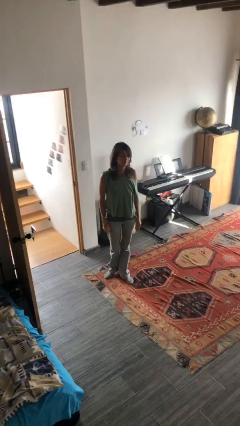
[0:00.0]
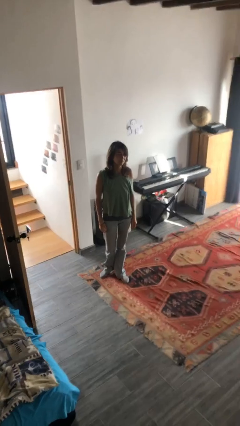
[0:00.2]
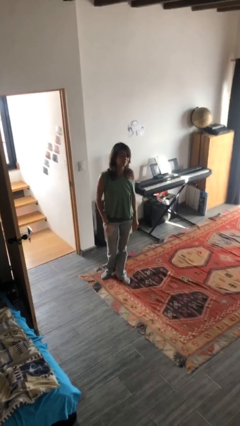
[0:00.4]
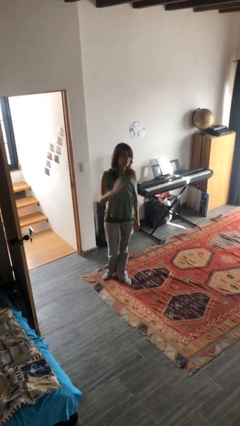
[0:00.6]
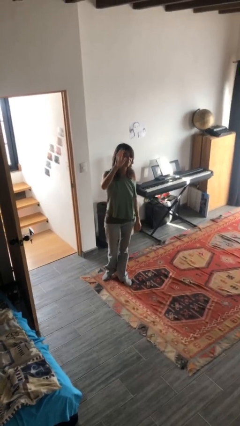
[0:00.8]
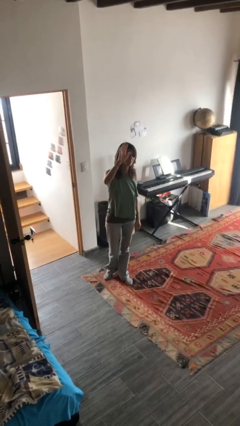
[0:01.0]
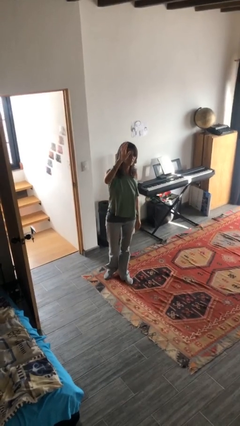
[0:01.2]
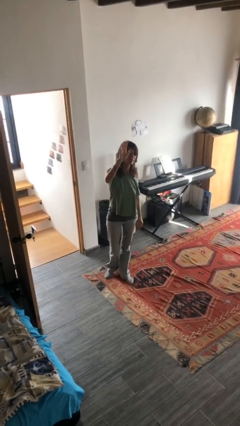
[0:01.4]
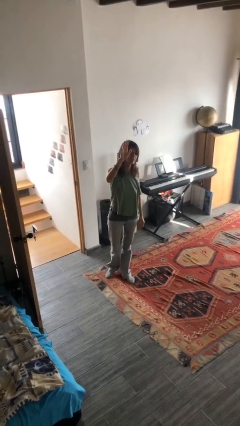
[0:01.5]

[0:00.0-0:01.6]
person gestures raise hand

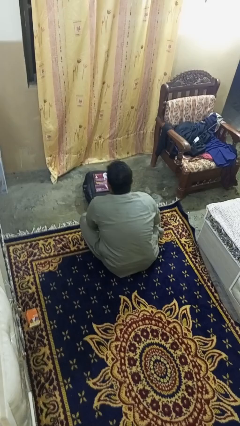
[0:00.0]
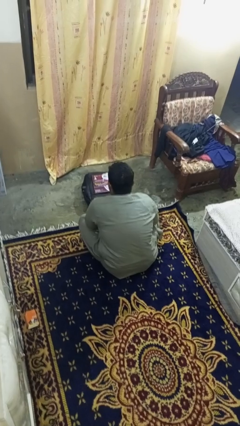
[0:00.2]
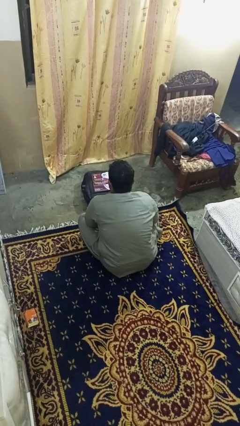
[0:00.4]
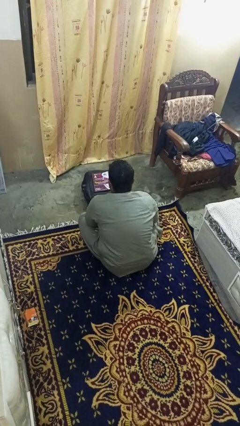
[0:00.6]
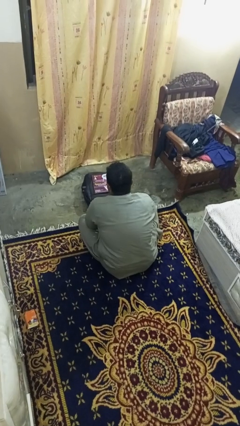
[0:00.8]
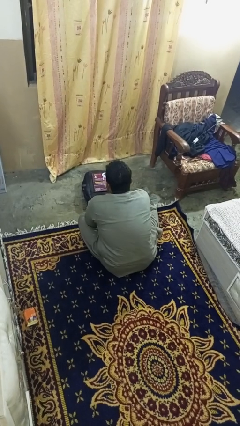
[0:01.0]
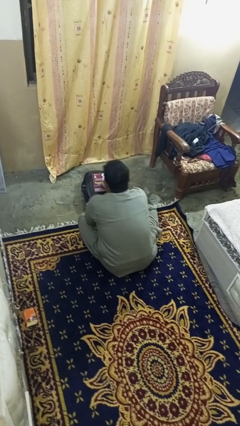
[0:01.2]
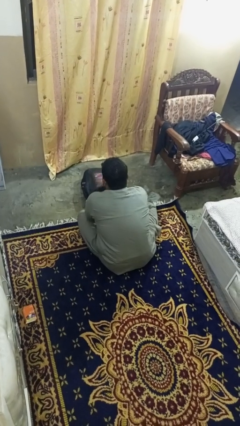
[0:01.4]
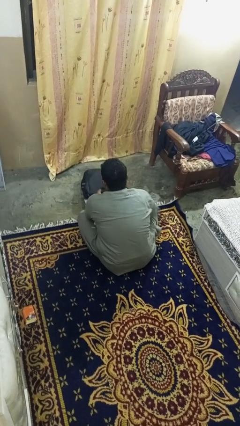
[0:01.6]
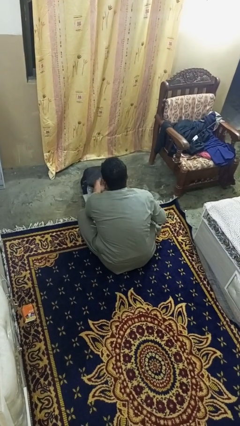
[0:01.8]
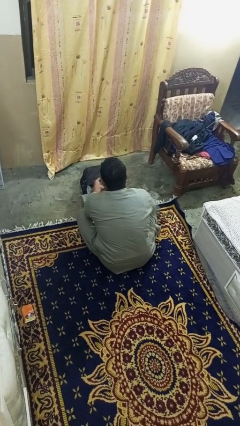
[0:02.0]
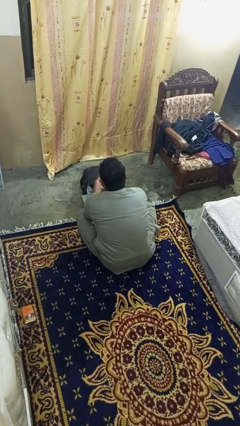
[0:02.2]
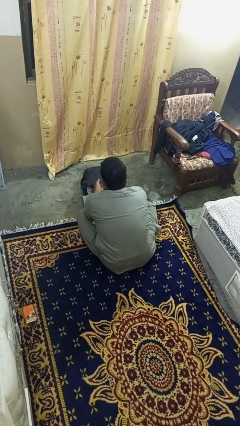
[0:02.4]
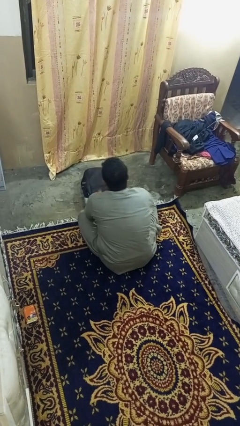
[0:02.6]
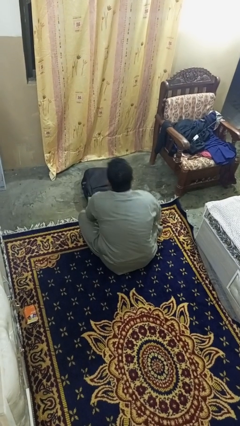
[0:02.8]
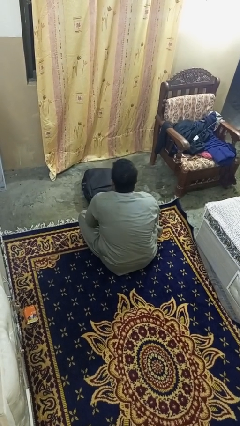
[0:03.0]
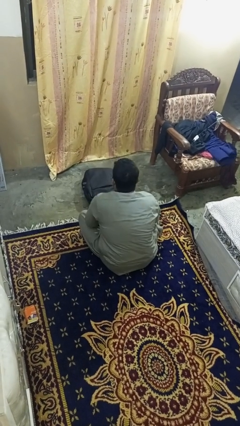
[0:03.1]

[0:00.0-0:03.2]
person puts object into bag

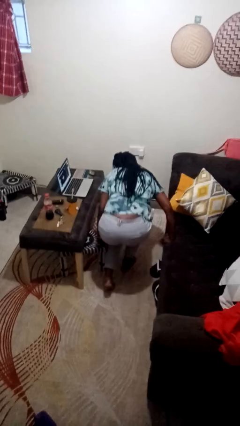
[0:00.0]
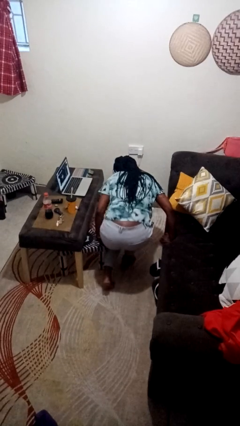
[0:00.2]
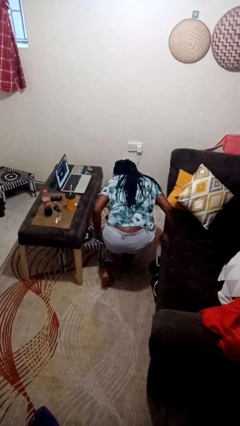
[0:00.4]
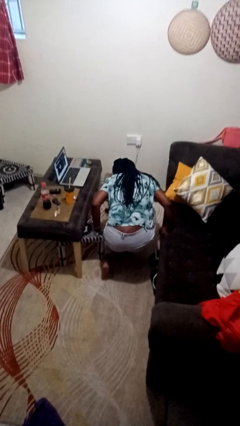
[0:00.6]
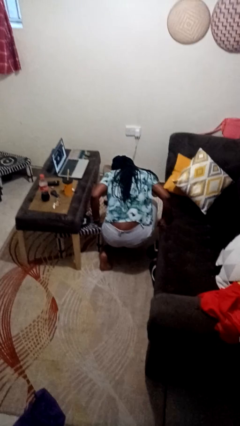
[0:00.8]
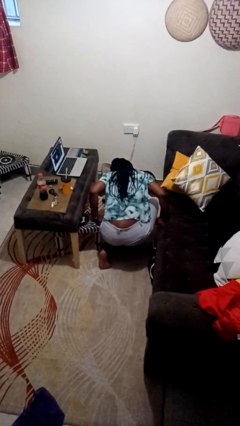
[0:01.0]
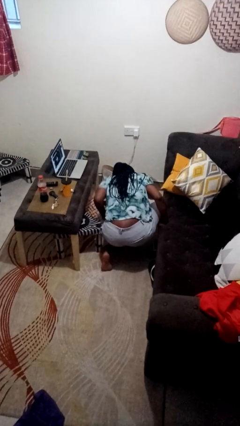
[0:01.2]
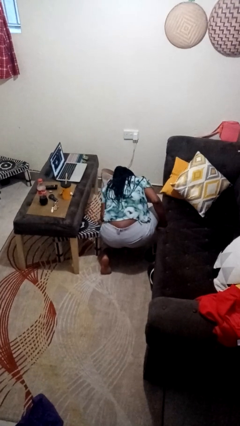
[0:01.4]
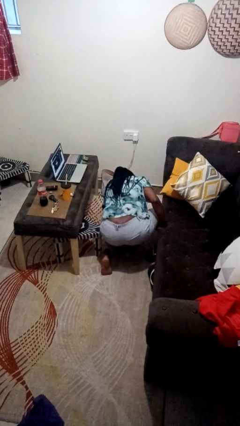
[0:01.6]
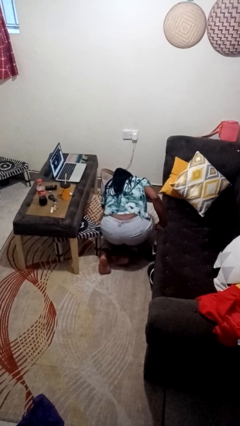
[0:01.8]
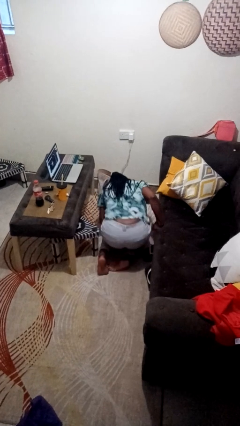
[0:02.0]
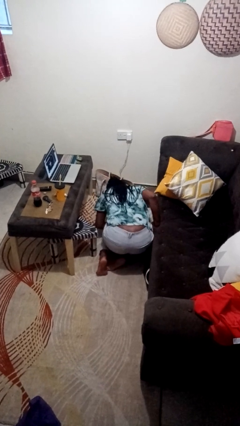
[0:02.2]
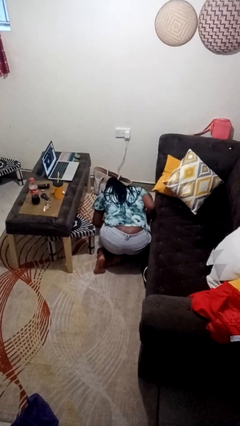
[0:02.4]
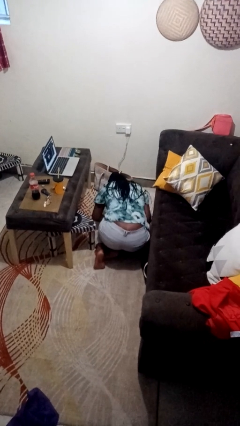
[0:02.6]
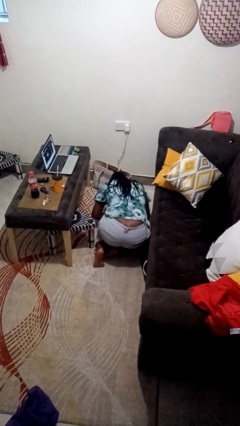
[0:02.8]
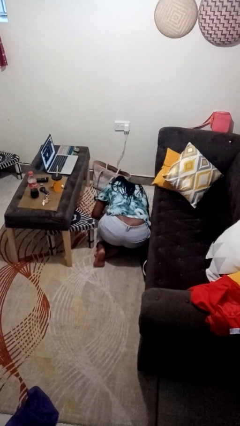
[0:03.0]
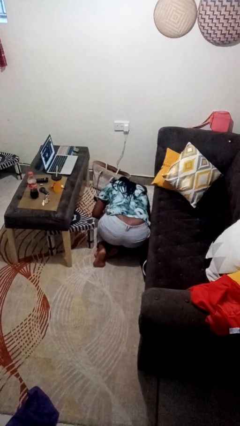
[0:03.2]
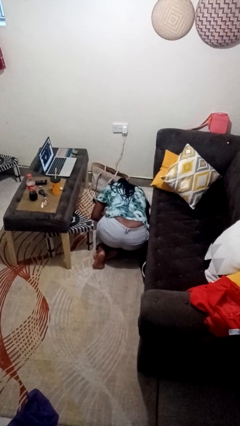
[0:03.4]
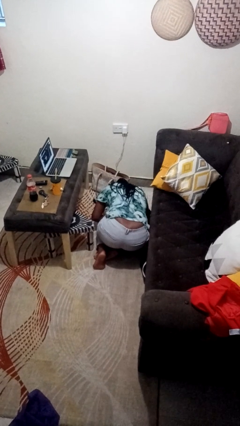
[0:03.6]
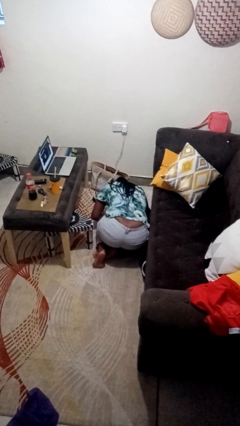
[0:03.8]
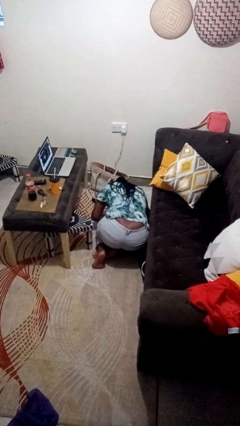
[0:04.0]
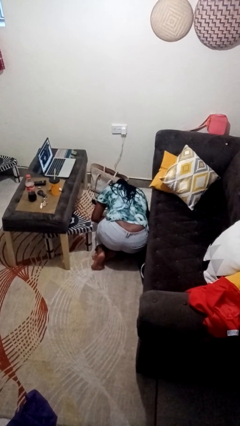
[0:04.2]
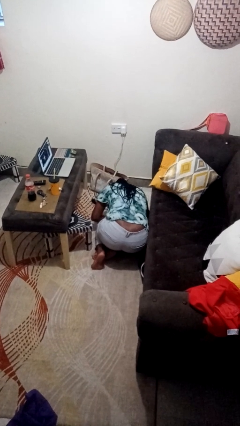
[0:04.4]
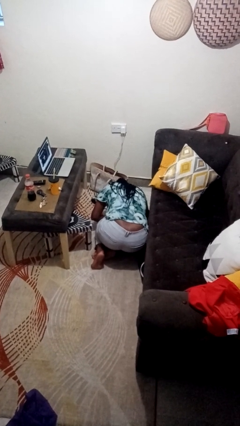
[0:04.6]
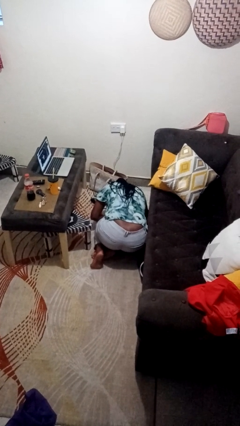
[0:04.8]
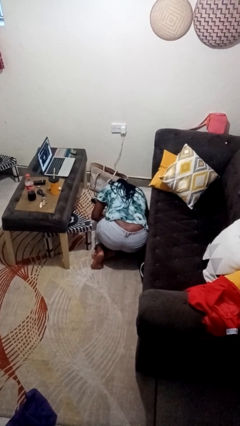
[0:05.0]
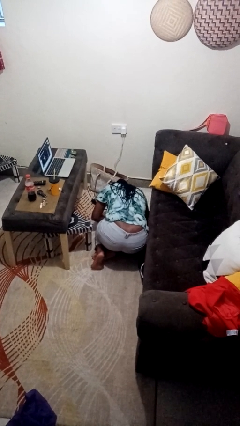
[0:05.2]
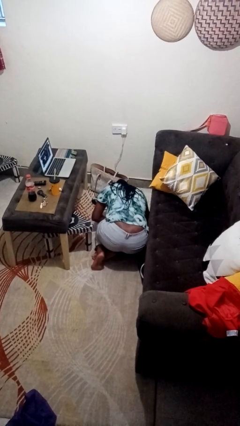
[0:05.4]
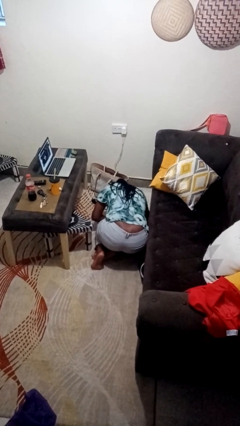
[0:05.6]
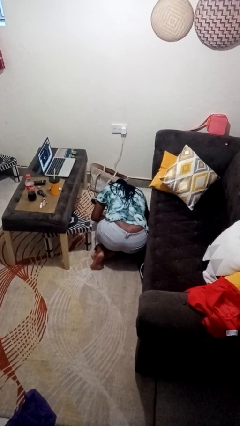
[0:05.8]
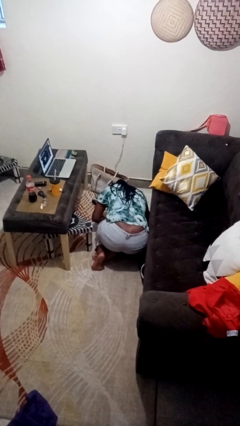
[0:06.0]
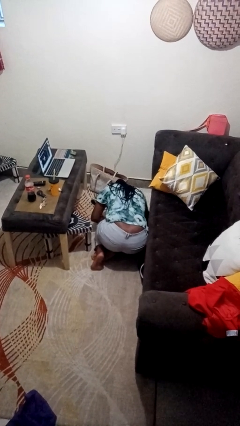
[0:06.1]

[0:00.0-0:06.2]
person lies down on floor

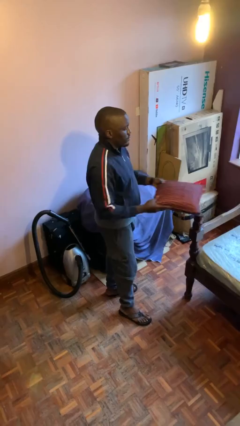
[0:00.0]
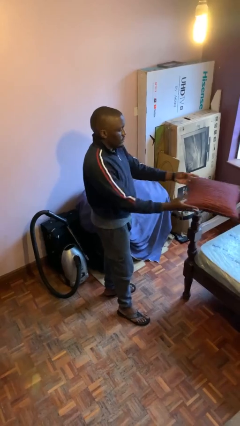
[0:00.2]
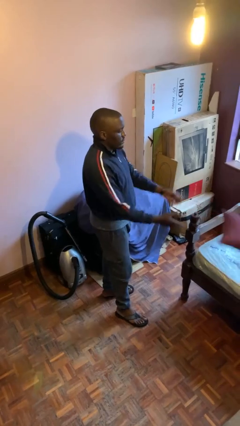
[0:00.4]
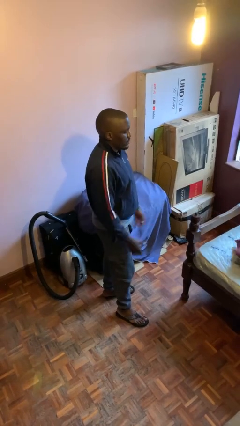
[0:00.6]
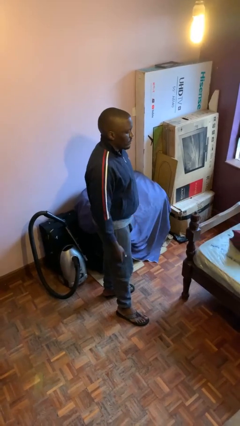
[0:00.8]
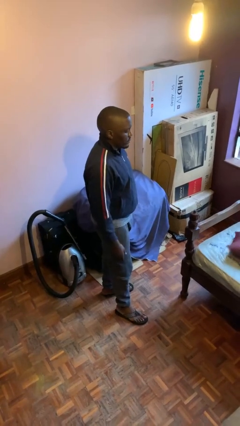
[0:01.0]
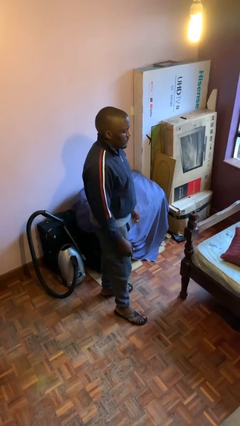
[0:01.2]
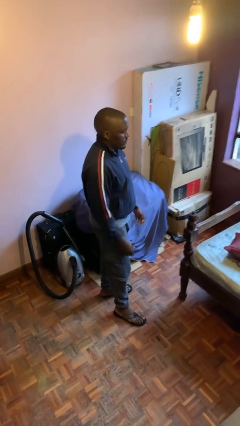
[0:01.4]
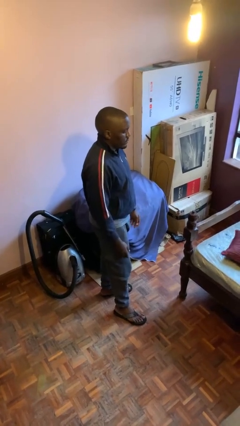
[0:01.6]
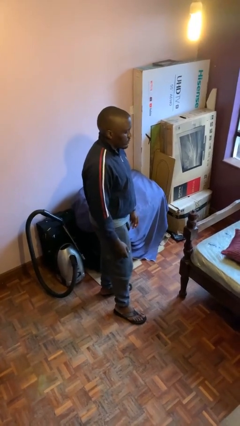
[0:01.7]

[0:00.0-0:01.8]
person throws object on bed

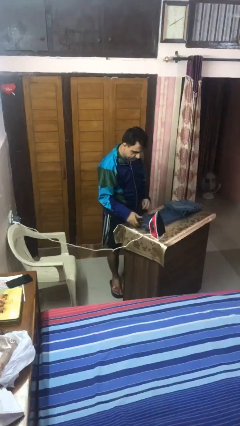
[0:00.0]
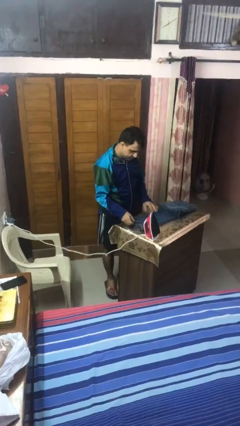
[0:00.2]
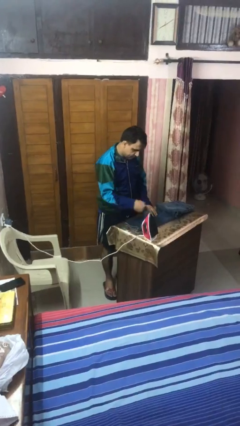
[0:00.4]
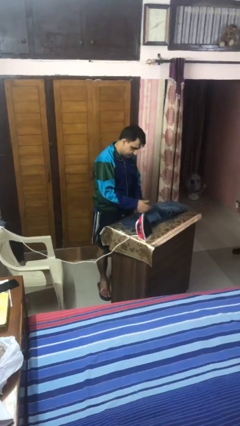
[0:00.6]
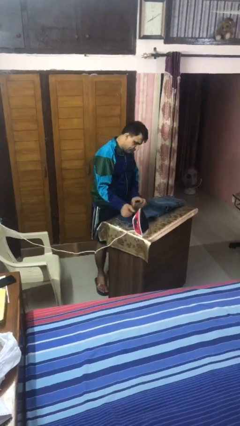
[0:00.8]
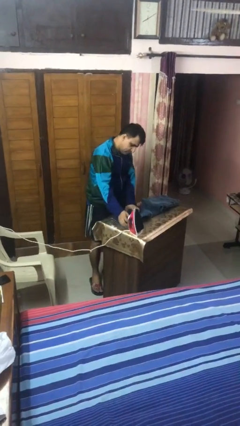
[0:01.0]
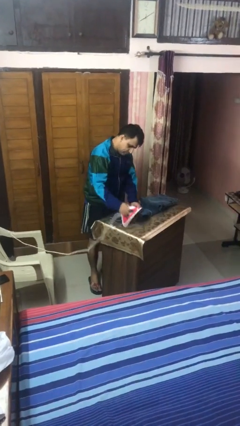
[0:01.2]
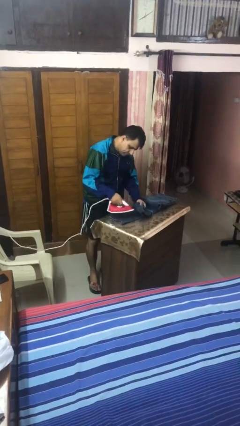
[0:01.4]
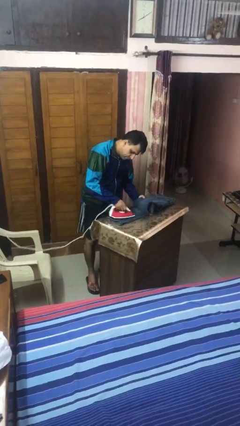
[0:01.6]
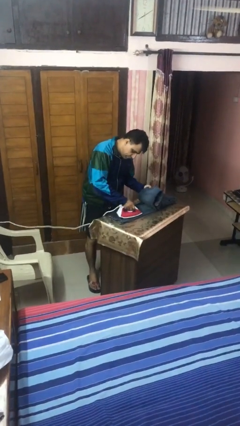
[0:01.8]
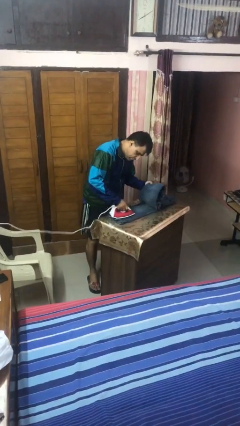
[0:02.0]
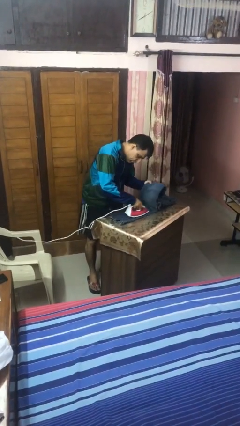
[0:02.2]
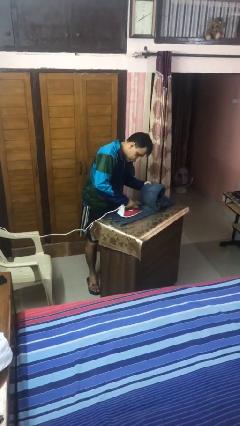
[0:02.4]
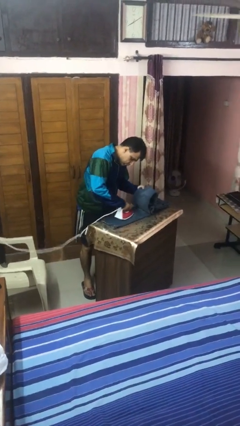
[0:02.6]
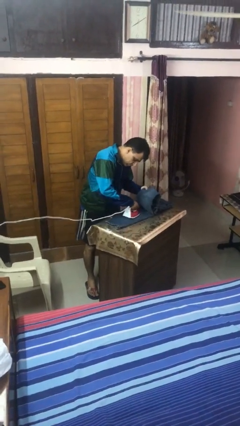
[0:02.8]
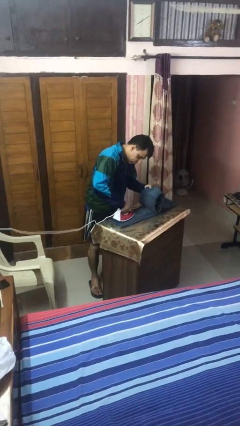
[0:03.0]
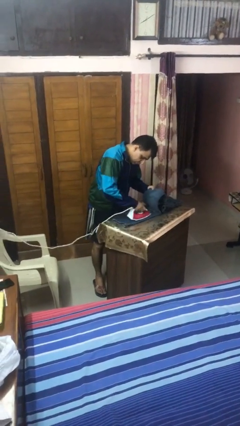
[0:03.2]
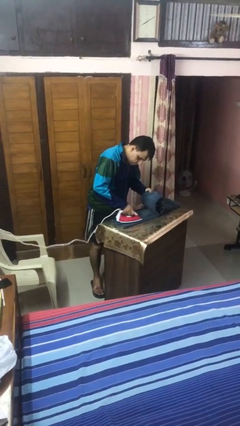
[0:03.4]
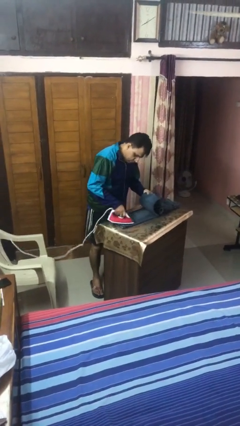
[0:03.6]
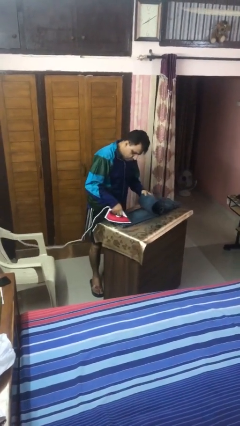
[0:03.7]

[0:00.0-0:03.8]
person irons clothes

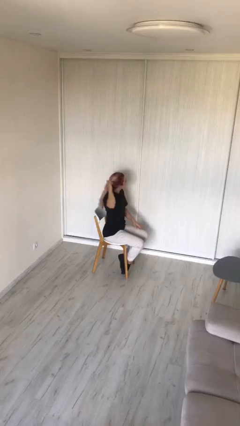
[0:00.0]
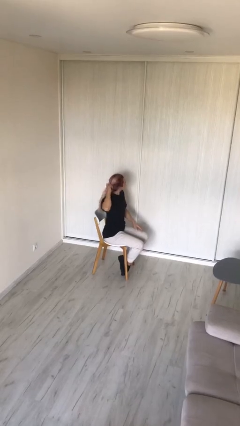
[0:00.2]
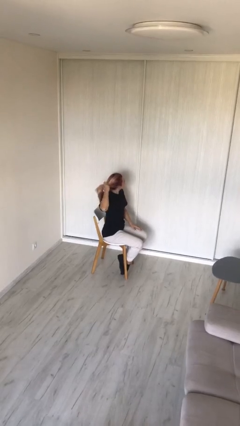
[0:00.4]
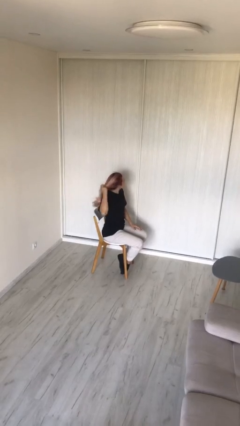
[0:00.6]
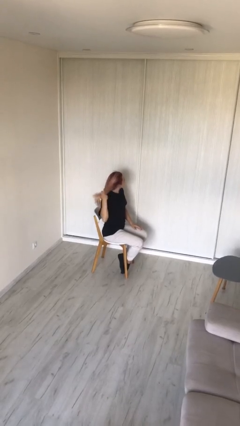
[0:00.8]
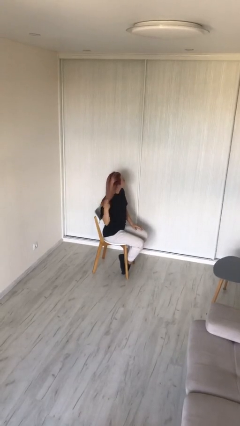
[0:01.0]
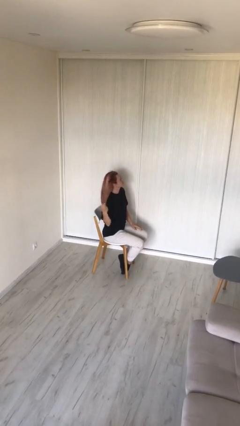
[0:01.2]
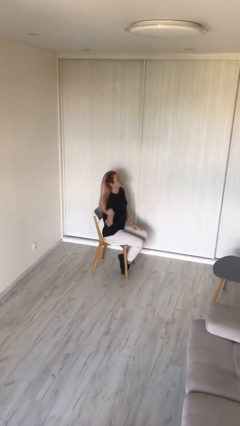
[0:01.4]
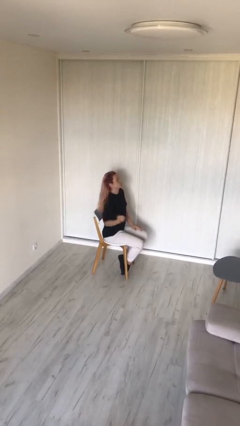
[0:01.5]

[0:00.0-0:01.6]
person takes off hairtie
